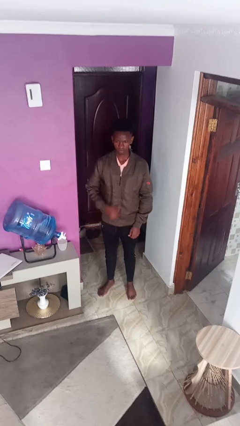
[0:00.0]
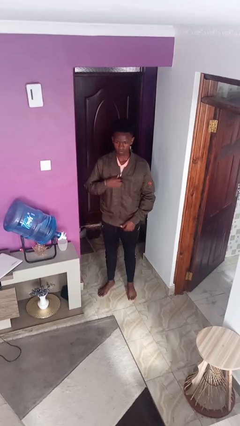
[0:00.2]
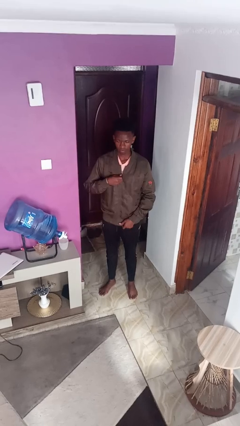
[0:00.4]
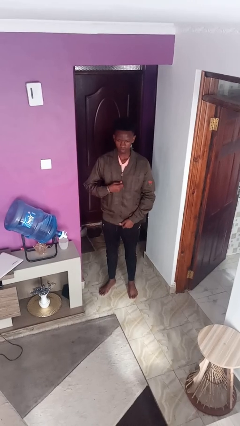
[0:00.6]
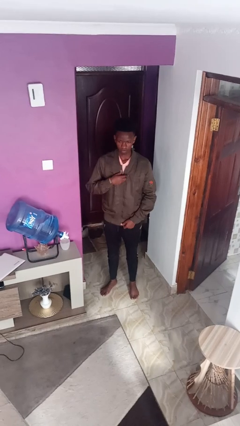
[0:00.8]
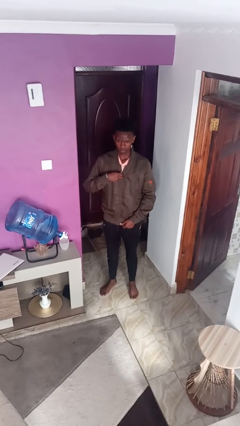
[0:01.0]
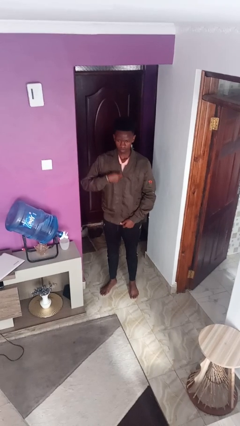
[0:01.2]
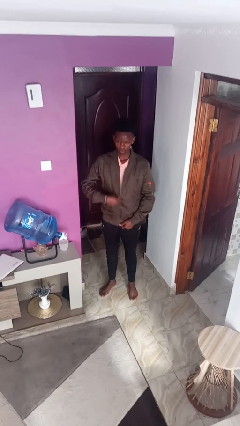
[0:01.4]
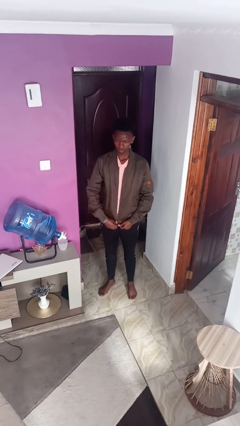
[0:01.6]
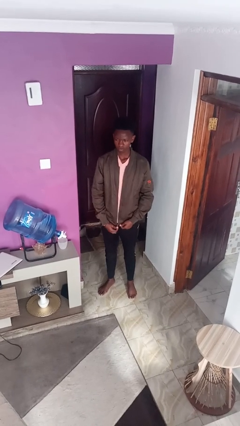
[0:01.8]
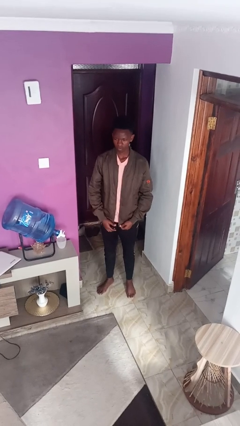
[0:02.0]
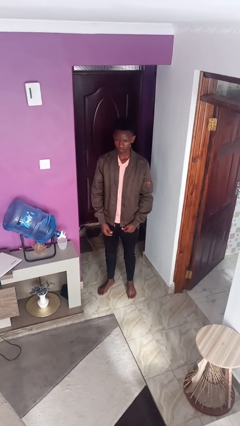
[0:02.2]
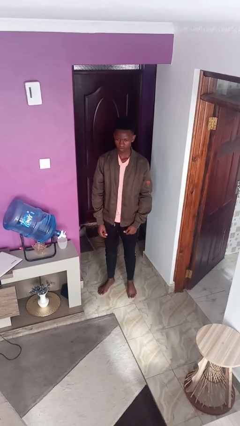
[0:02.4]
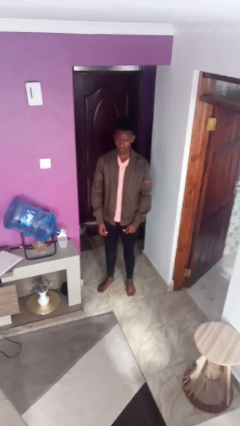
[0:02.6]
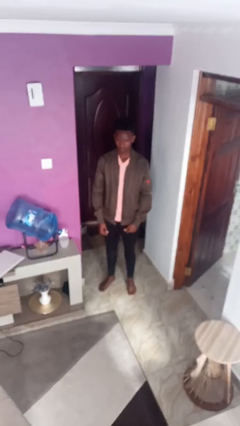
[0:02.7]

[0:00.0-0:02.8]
person unzips jacket

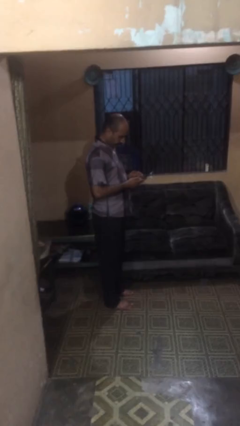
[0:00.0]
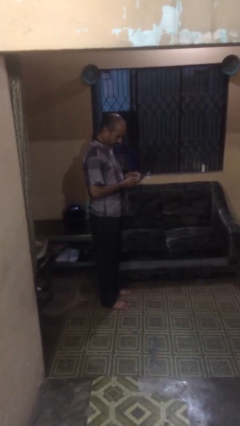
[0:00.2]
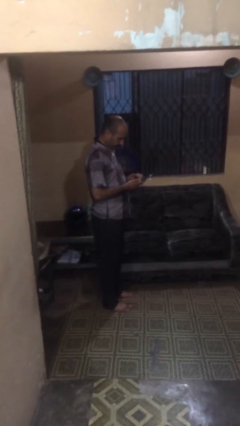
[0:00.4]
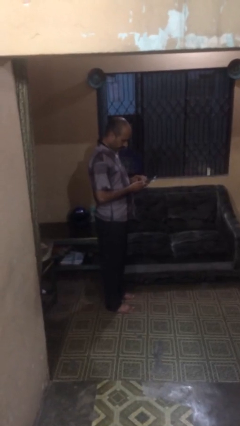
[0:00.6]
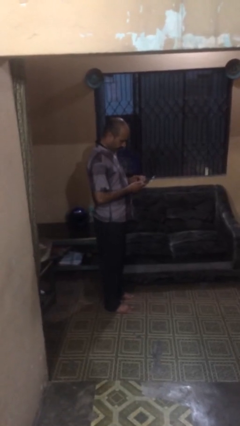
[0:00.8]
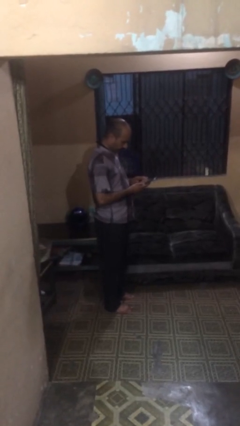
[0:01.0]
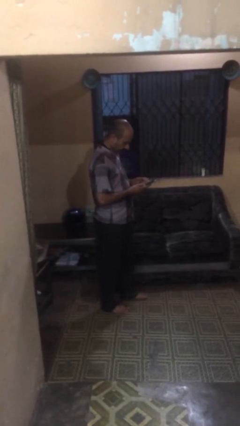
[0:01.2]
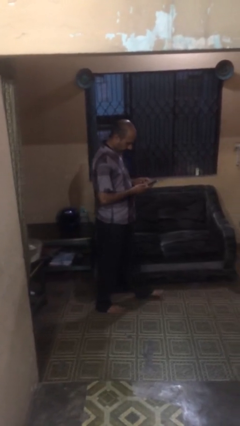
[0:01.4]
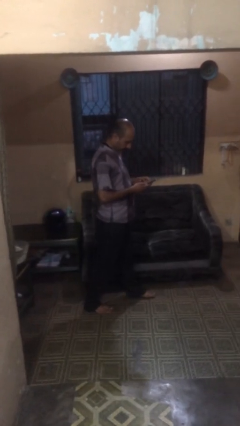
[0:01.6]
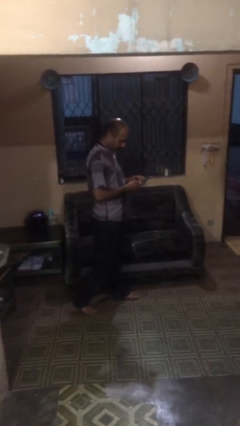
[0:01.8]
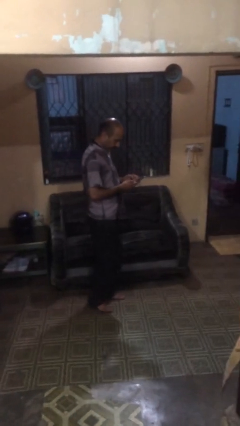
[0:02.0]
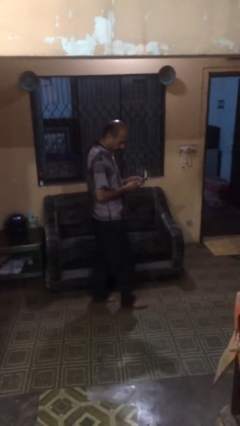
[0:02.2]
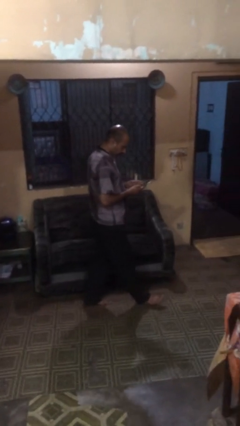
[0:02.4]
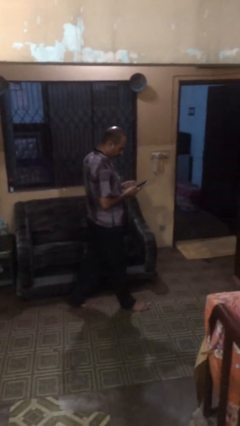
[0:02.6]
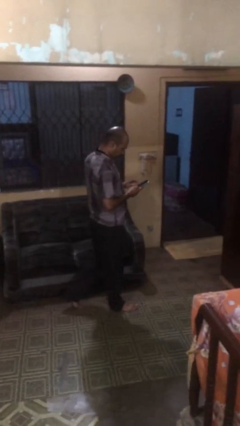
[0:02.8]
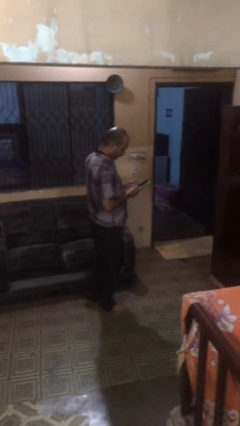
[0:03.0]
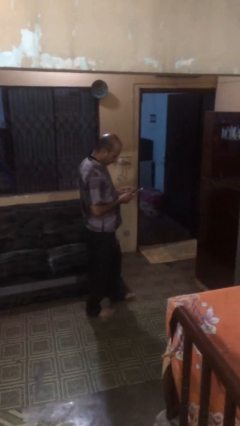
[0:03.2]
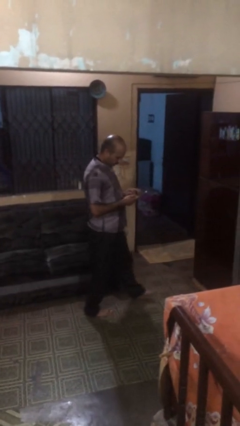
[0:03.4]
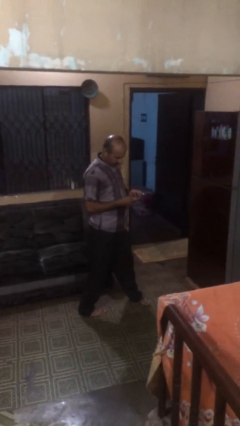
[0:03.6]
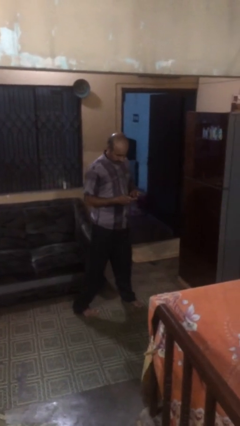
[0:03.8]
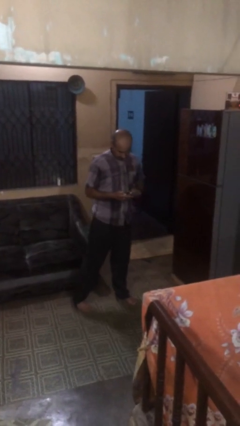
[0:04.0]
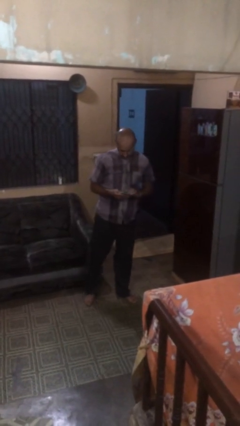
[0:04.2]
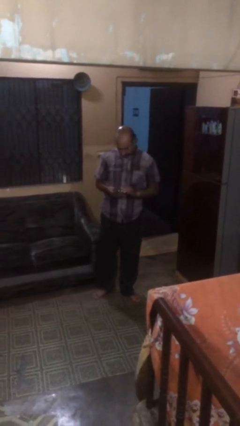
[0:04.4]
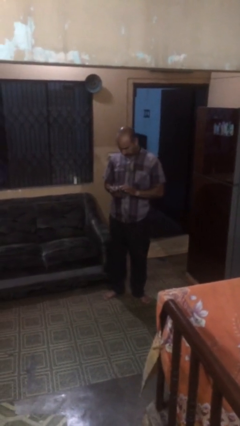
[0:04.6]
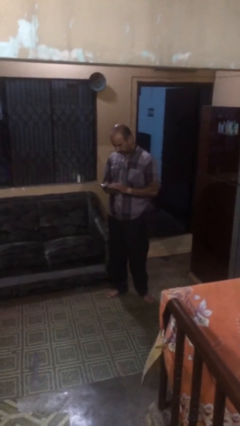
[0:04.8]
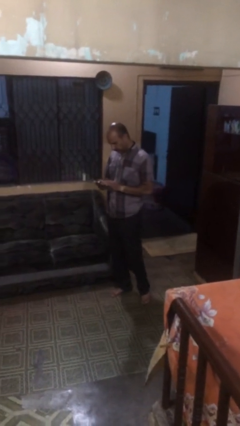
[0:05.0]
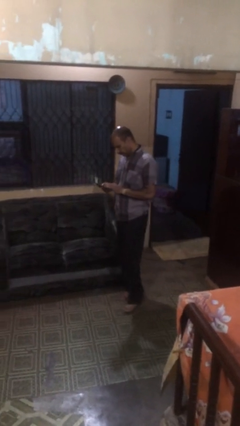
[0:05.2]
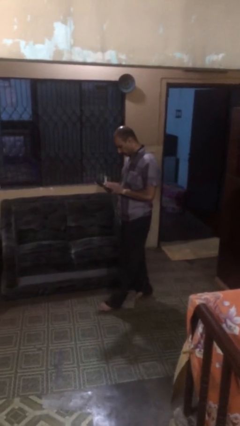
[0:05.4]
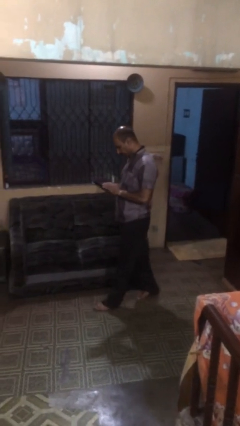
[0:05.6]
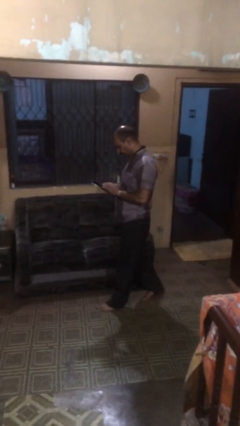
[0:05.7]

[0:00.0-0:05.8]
person texts on phone

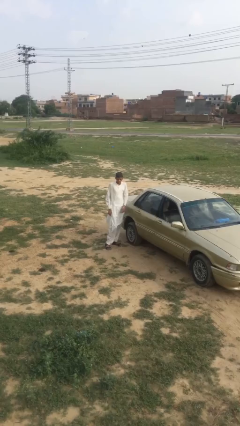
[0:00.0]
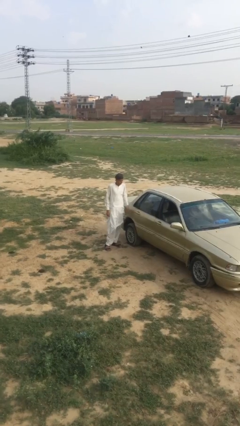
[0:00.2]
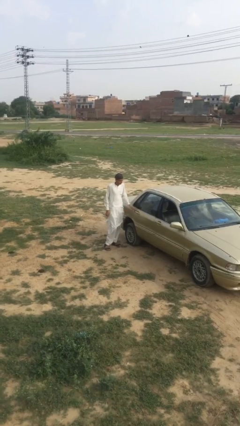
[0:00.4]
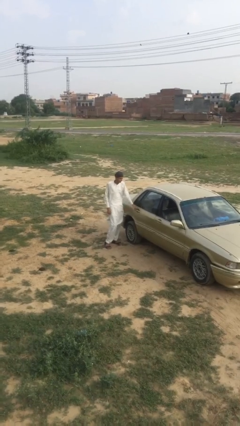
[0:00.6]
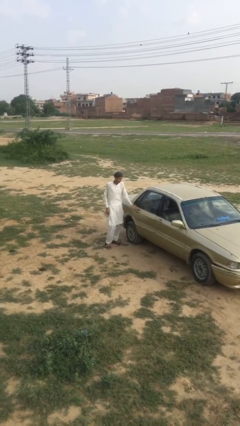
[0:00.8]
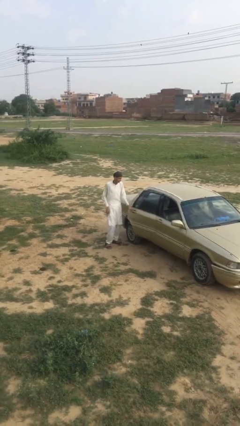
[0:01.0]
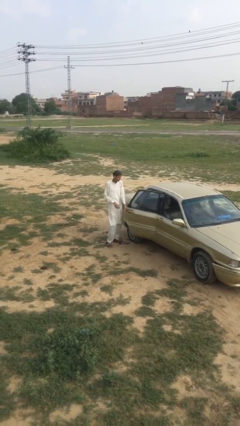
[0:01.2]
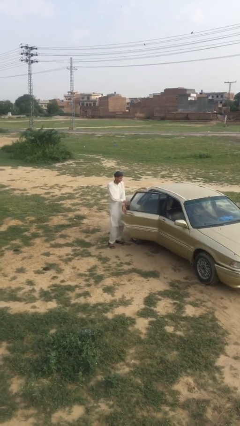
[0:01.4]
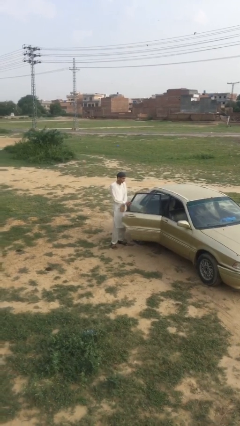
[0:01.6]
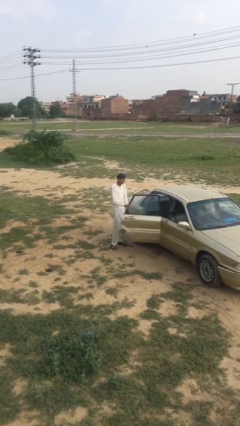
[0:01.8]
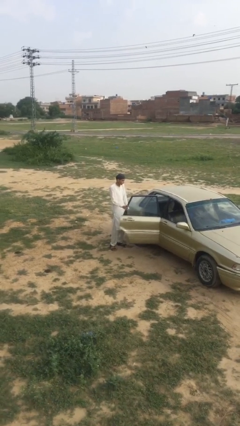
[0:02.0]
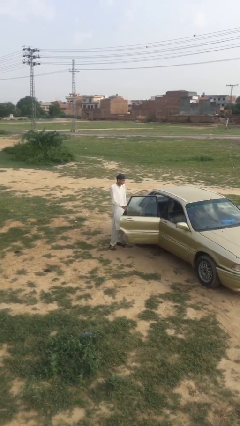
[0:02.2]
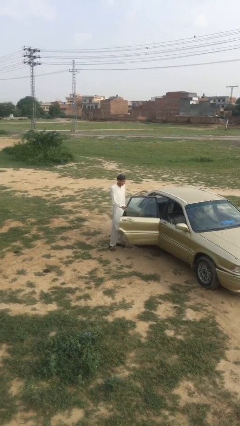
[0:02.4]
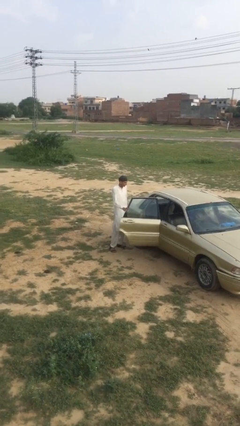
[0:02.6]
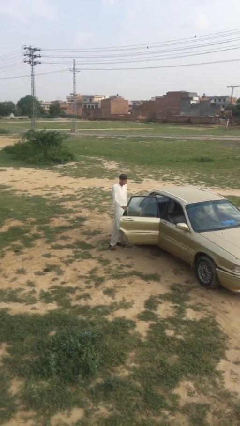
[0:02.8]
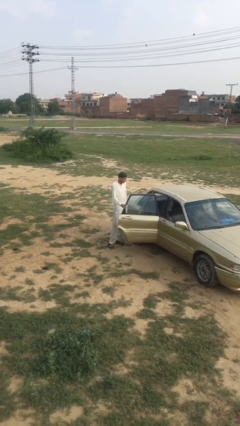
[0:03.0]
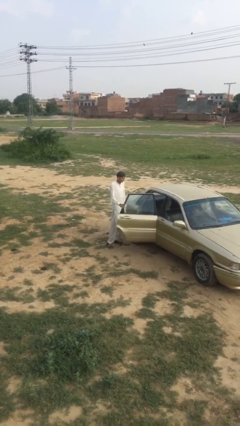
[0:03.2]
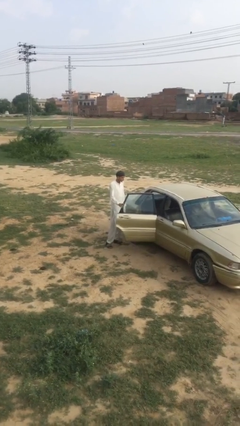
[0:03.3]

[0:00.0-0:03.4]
person opens car door

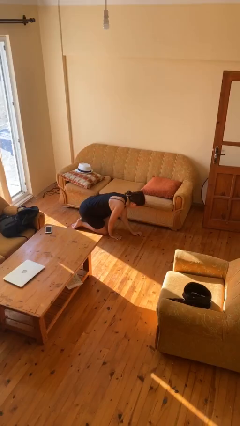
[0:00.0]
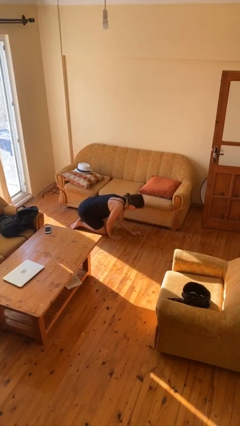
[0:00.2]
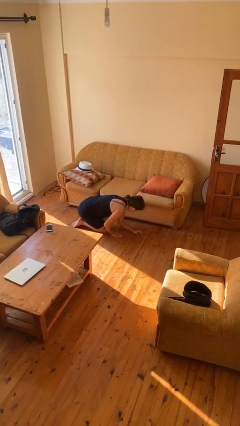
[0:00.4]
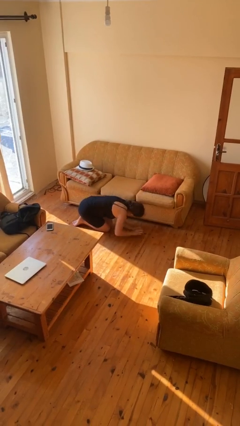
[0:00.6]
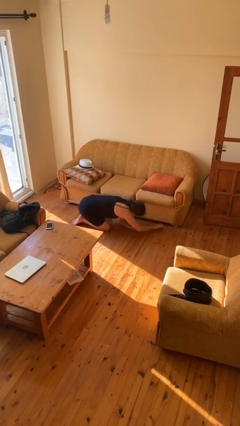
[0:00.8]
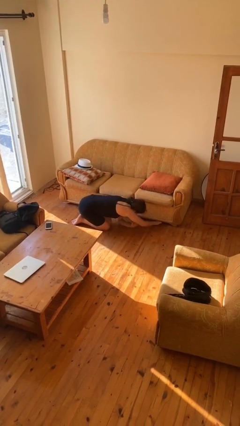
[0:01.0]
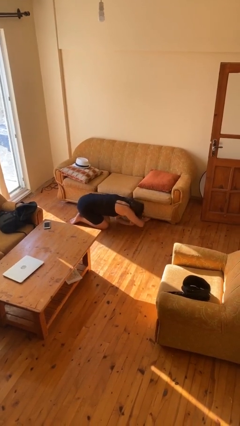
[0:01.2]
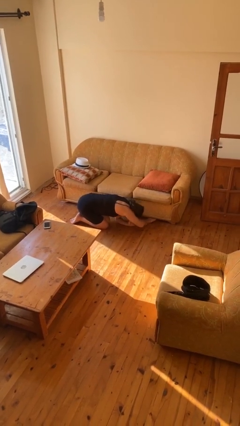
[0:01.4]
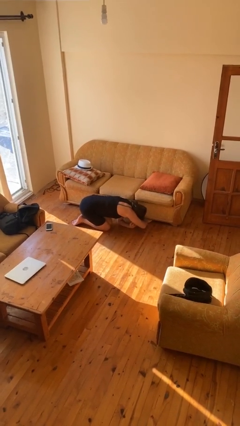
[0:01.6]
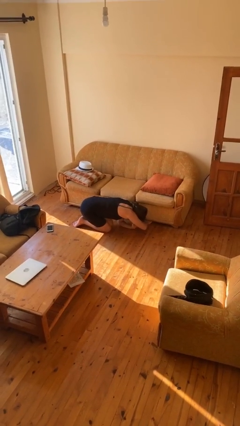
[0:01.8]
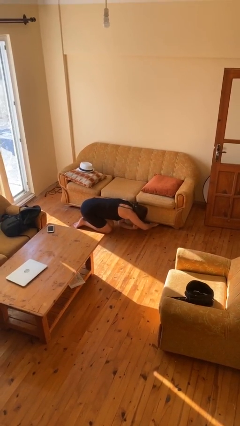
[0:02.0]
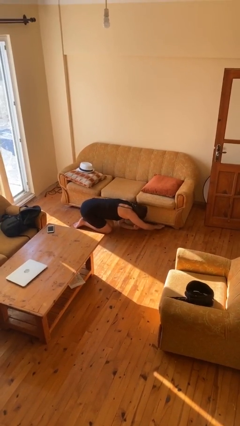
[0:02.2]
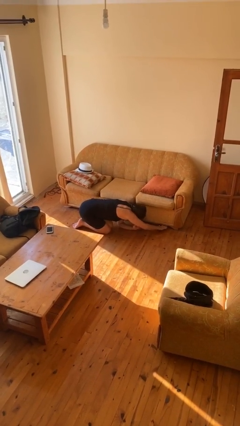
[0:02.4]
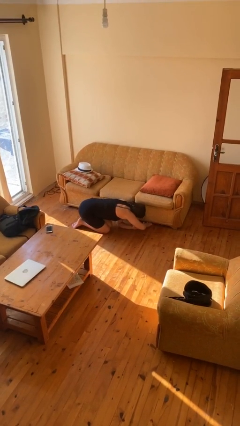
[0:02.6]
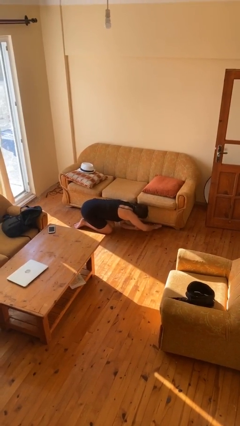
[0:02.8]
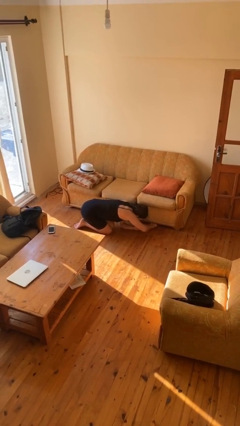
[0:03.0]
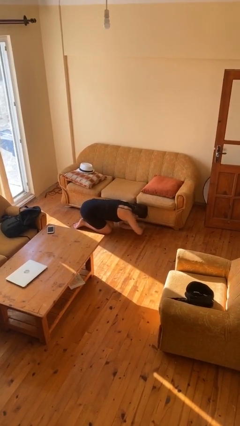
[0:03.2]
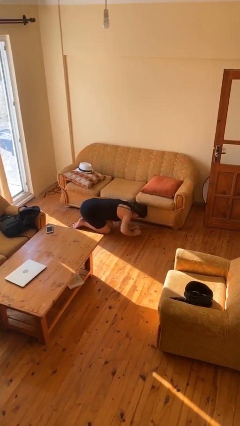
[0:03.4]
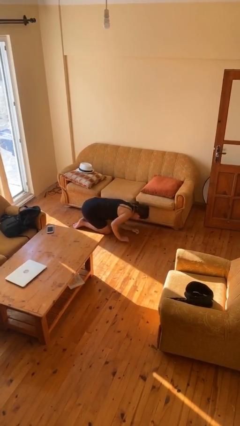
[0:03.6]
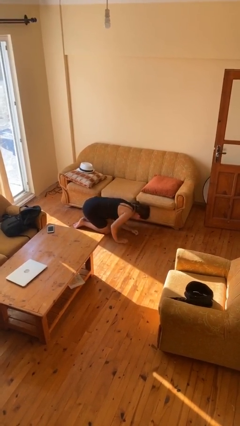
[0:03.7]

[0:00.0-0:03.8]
person searches under couch

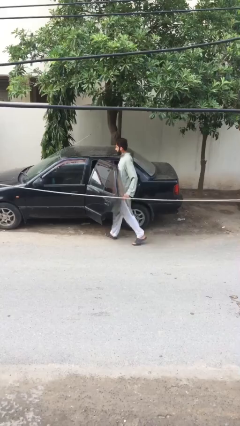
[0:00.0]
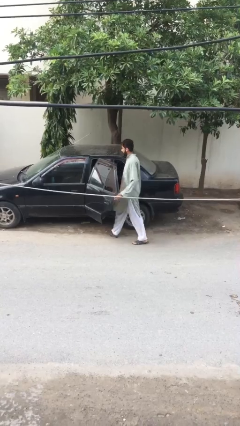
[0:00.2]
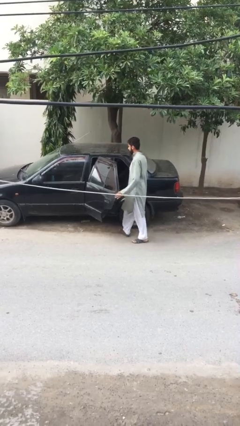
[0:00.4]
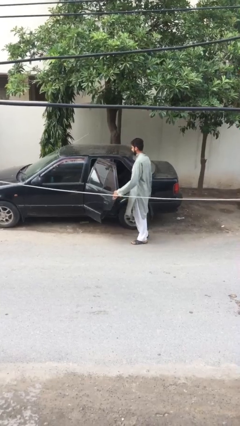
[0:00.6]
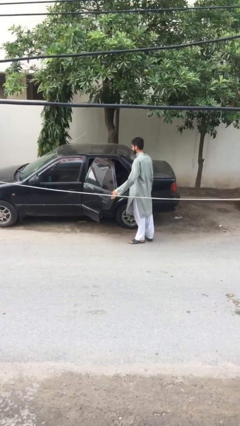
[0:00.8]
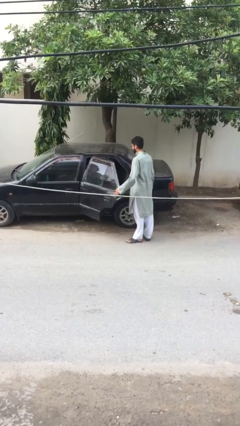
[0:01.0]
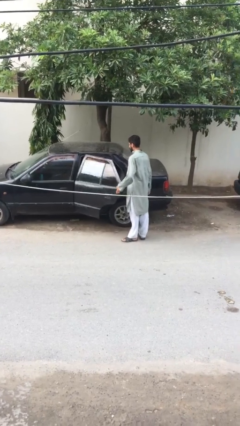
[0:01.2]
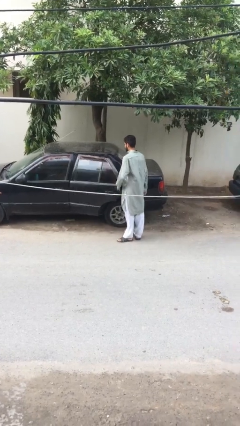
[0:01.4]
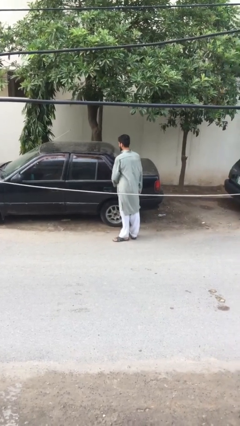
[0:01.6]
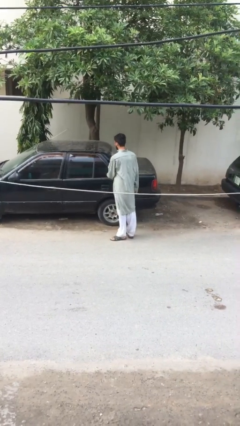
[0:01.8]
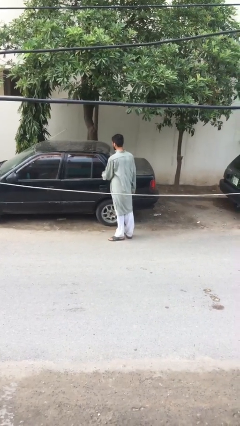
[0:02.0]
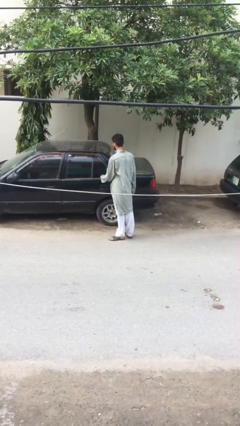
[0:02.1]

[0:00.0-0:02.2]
person closes car door
